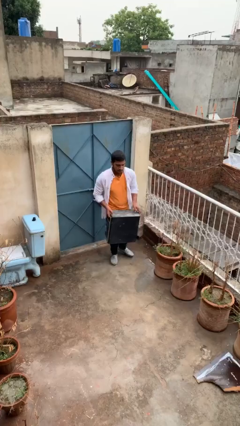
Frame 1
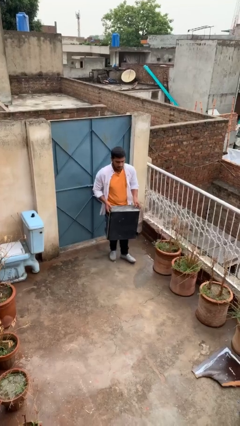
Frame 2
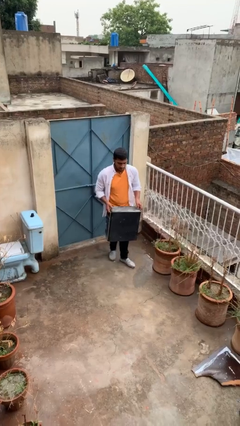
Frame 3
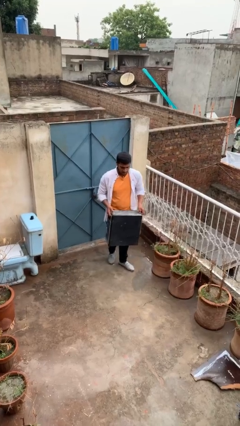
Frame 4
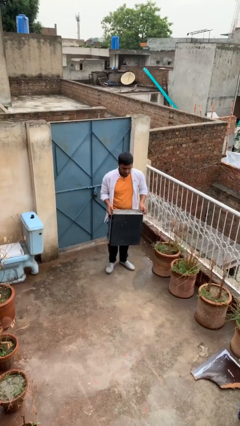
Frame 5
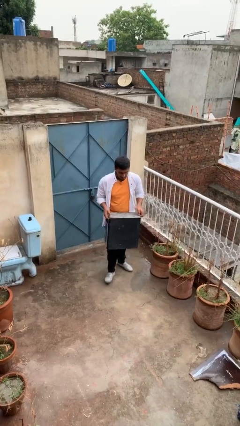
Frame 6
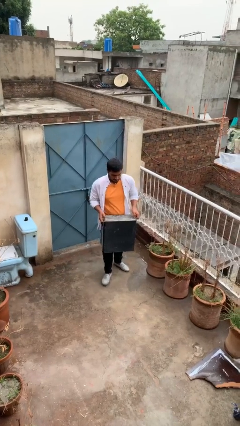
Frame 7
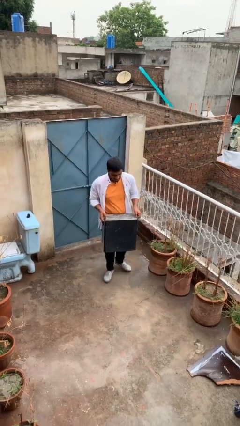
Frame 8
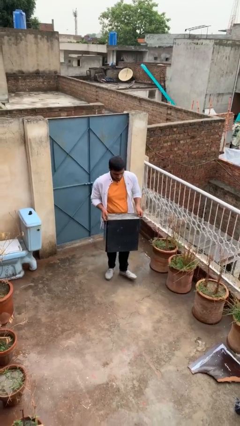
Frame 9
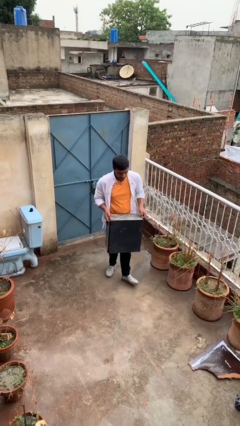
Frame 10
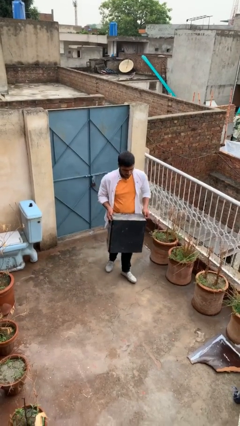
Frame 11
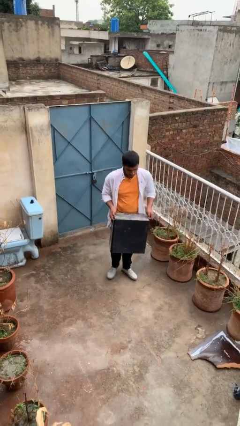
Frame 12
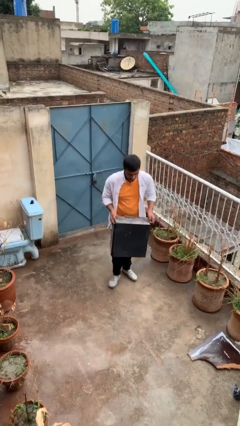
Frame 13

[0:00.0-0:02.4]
person carries heavy object

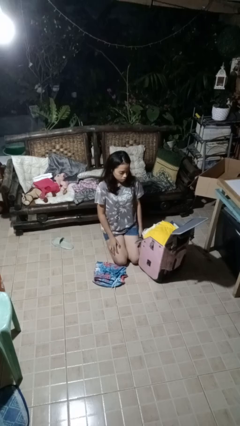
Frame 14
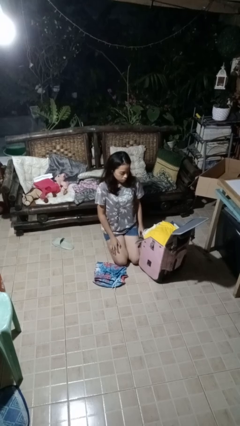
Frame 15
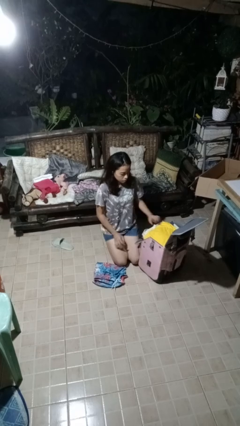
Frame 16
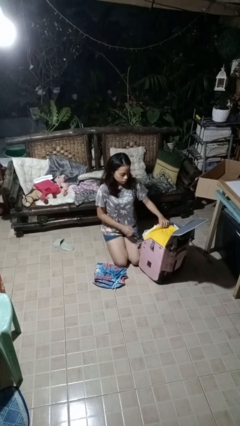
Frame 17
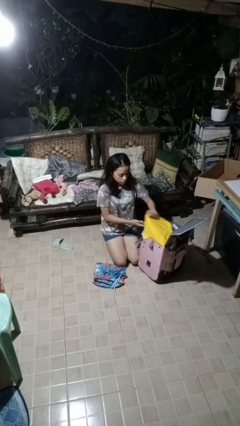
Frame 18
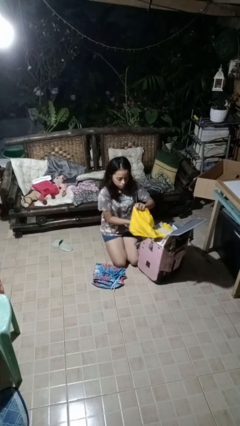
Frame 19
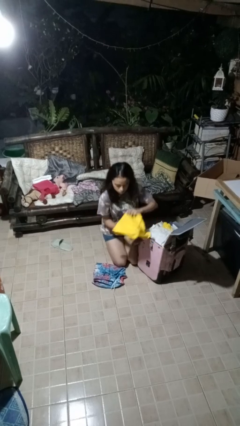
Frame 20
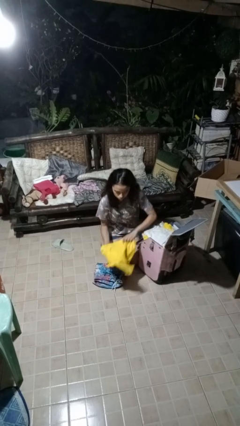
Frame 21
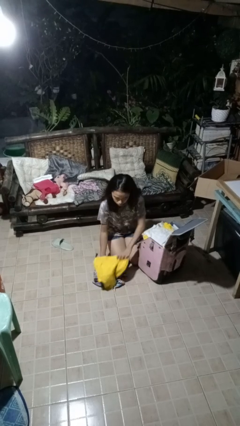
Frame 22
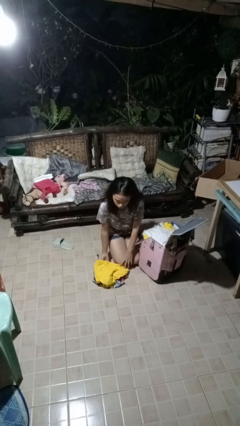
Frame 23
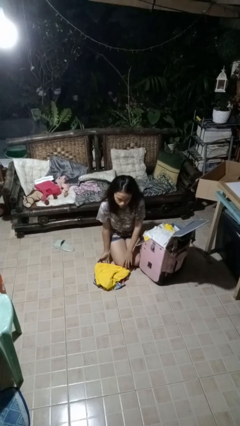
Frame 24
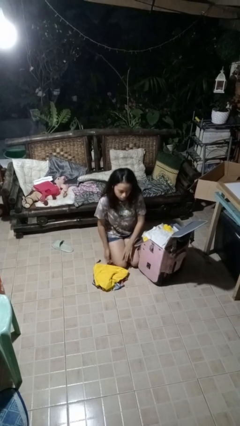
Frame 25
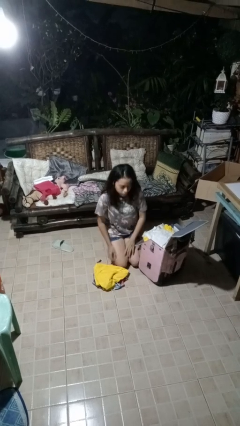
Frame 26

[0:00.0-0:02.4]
person unloads clothes from suitcase

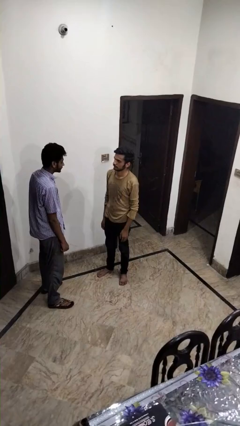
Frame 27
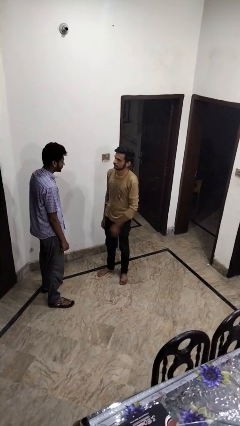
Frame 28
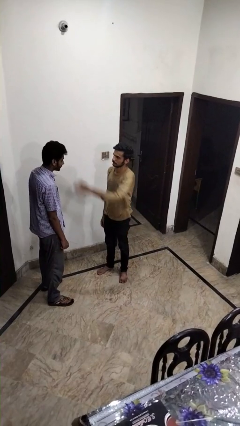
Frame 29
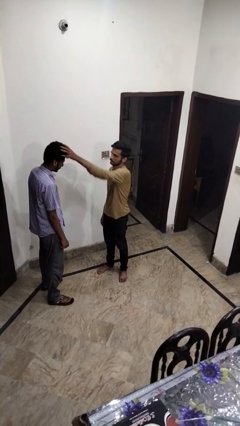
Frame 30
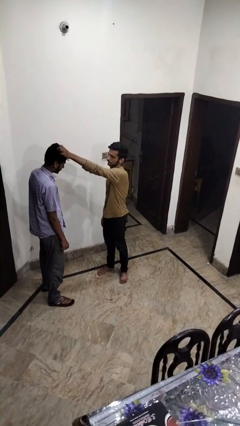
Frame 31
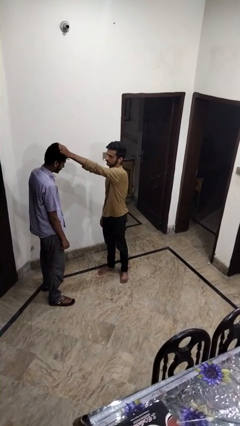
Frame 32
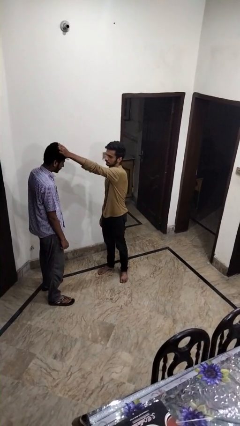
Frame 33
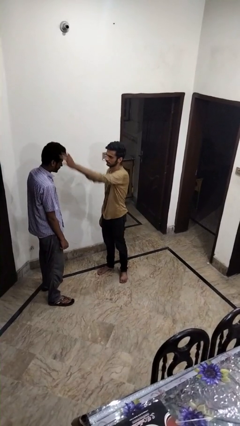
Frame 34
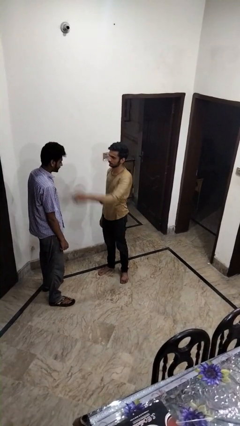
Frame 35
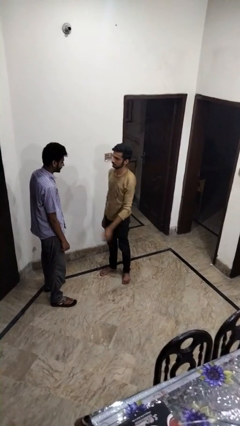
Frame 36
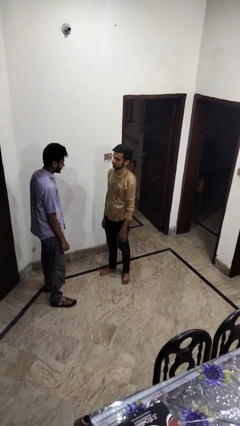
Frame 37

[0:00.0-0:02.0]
person grabs person by hair

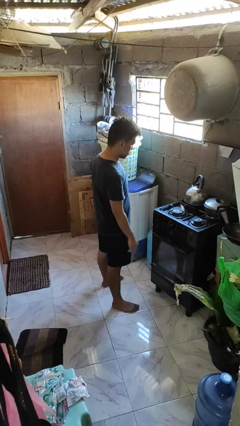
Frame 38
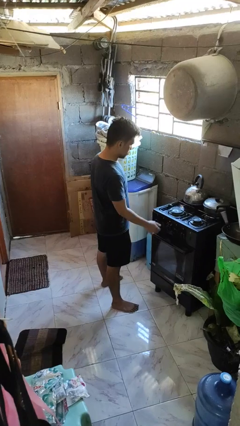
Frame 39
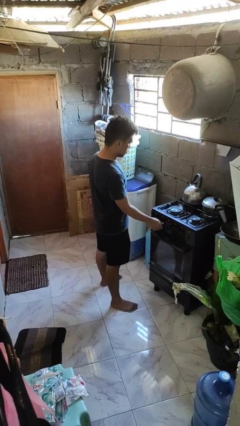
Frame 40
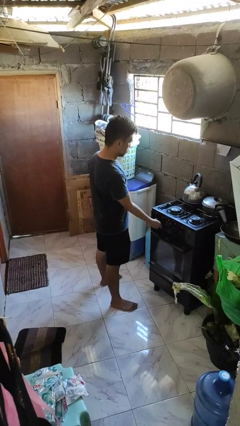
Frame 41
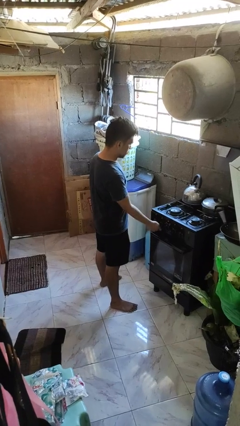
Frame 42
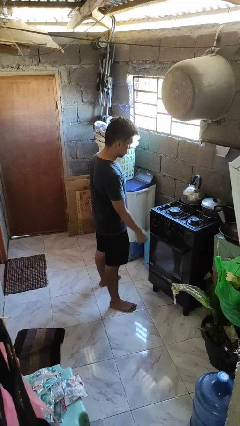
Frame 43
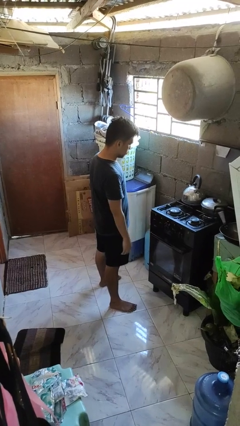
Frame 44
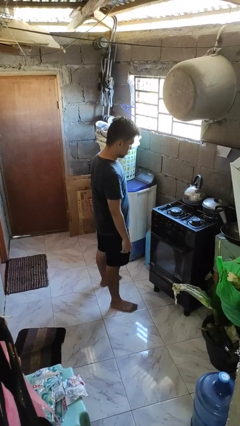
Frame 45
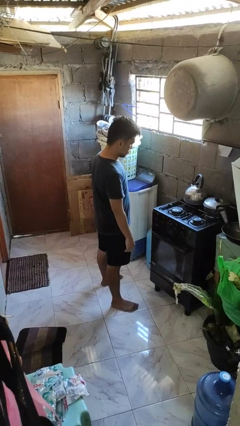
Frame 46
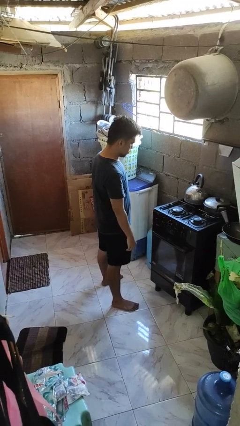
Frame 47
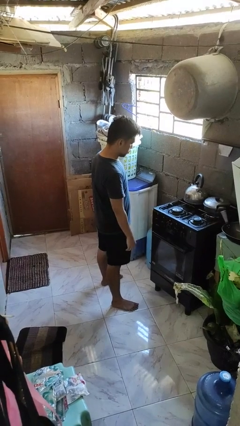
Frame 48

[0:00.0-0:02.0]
person turns off stovetop

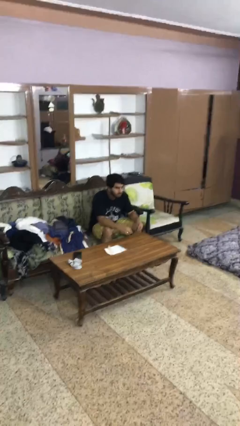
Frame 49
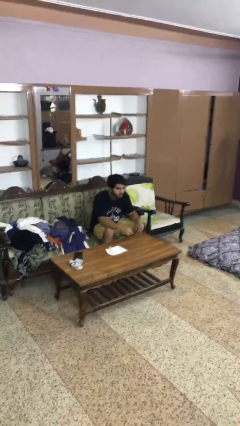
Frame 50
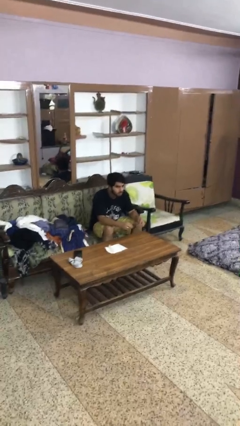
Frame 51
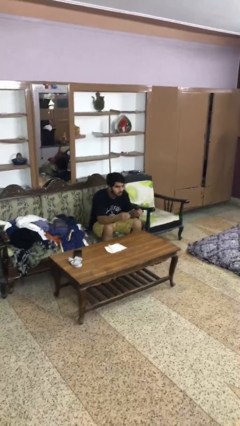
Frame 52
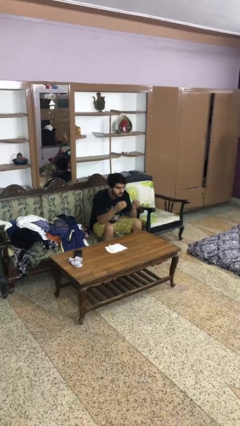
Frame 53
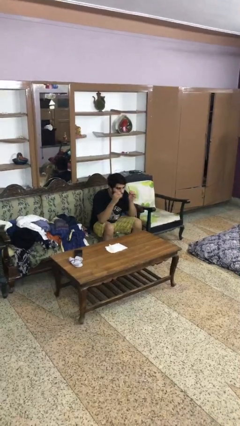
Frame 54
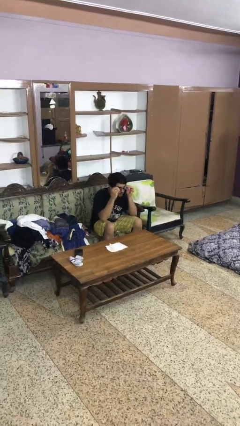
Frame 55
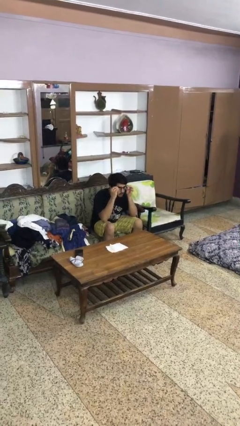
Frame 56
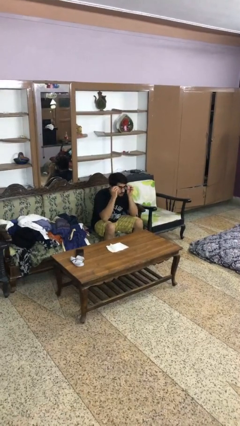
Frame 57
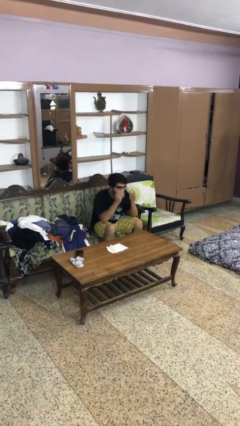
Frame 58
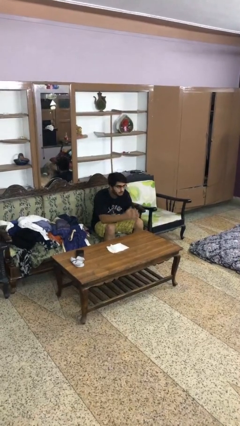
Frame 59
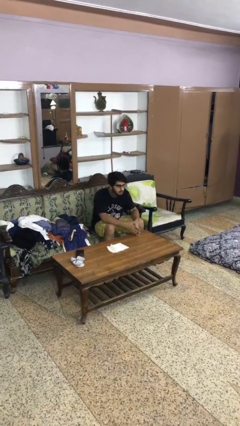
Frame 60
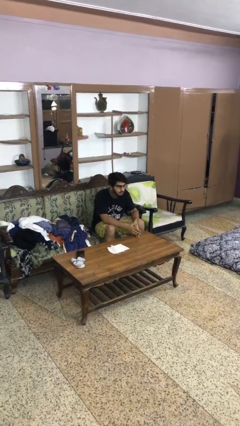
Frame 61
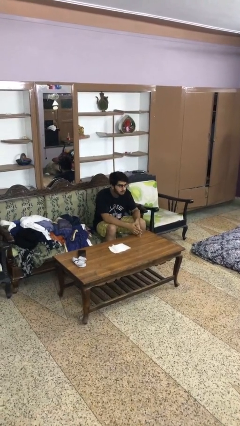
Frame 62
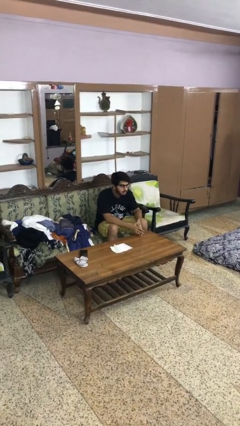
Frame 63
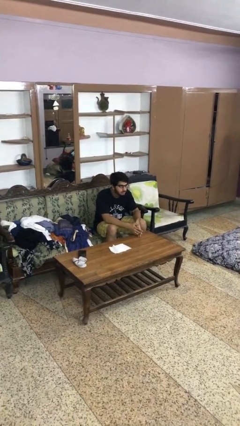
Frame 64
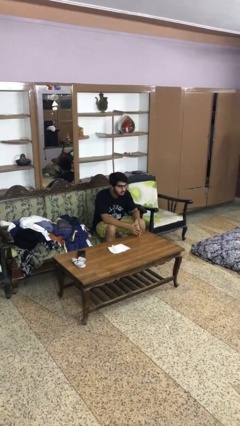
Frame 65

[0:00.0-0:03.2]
person puts on glasses

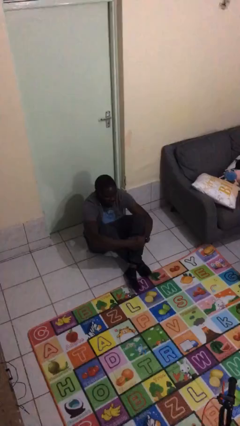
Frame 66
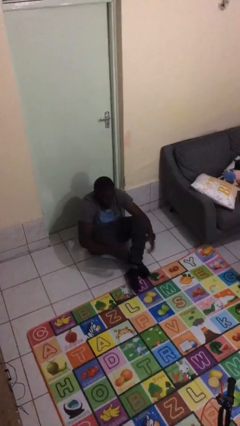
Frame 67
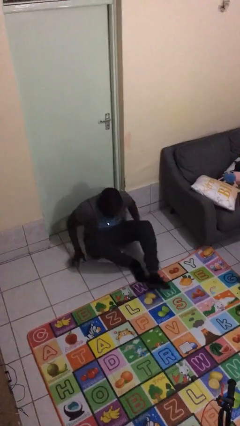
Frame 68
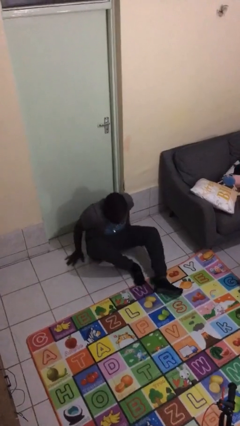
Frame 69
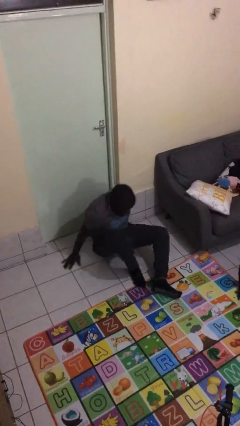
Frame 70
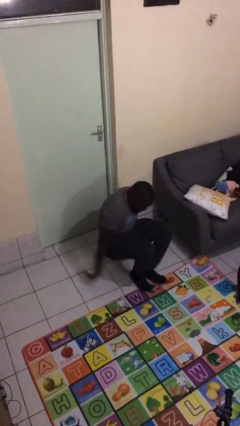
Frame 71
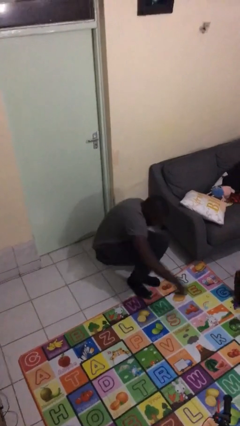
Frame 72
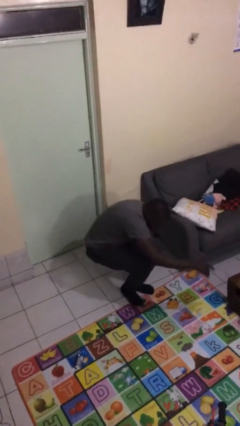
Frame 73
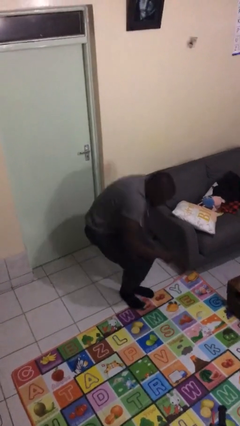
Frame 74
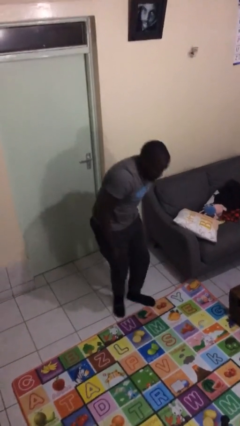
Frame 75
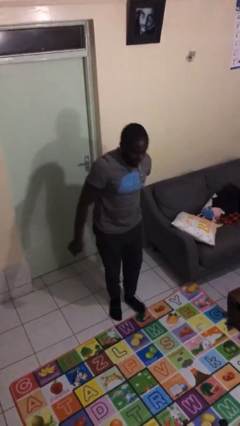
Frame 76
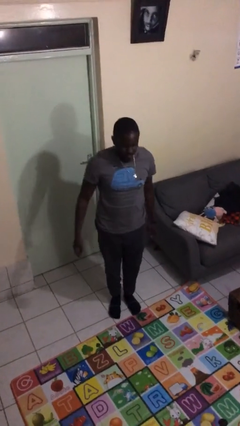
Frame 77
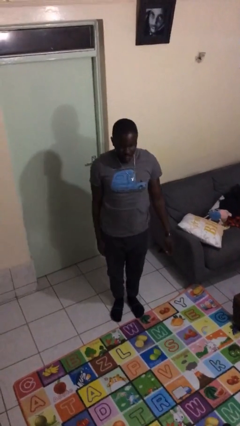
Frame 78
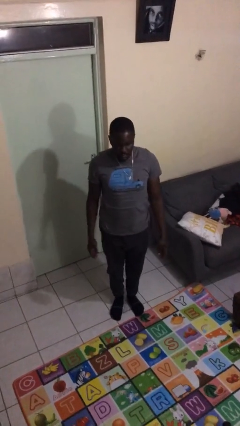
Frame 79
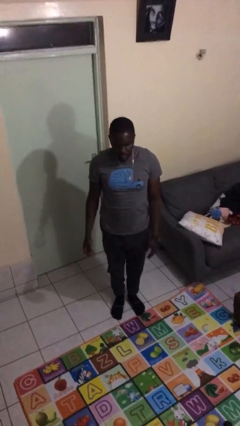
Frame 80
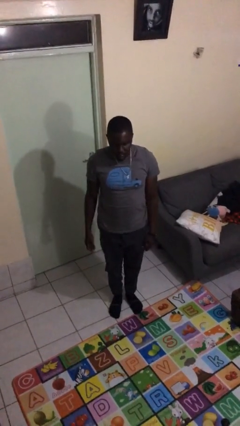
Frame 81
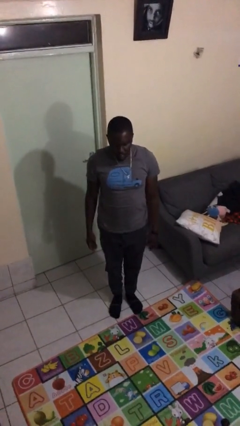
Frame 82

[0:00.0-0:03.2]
person stands up from floor

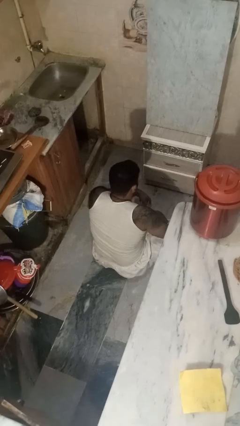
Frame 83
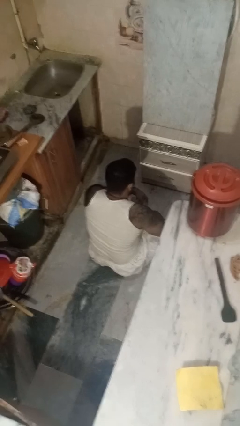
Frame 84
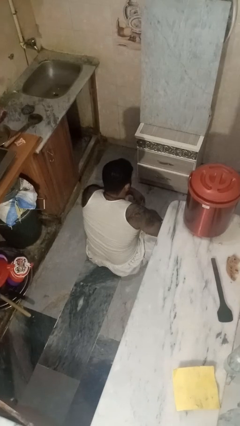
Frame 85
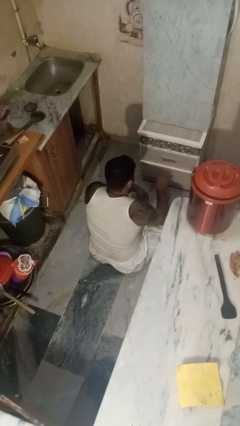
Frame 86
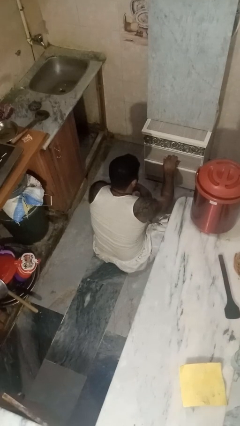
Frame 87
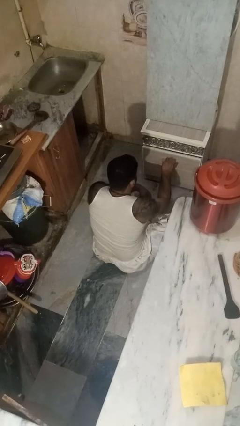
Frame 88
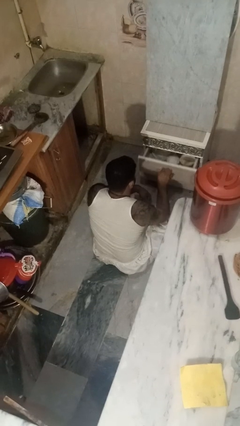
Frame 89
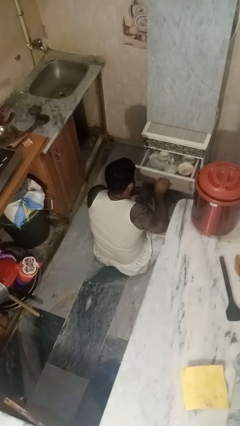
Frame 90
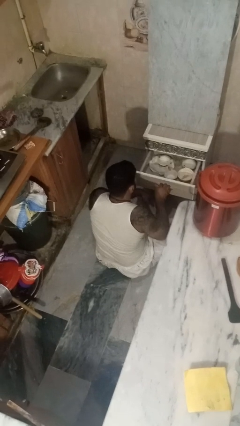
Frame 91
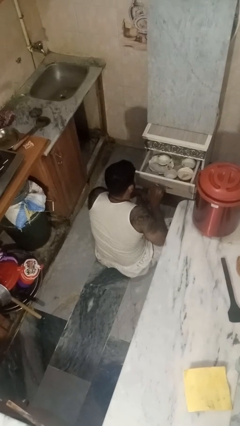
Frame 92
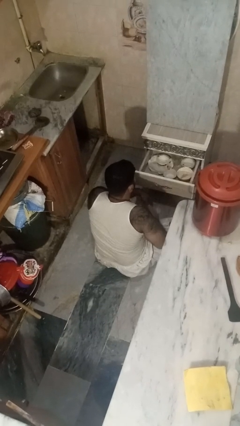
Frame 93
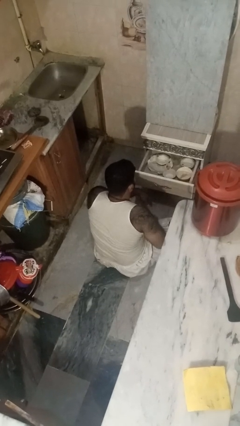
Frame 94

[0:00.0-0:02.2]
person opens kitchen drawer
